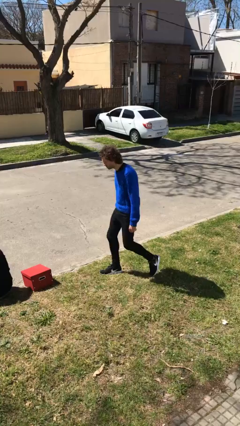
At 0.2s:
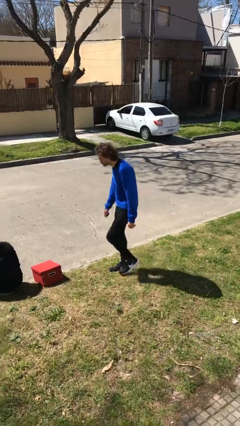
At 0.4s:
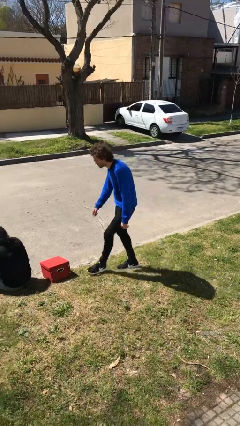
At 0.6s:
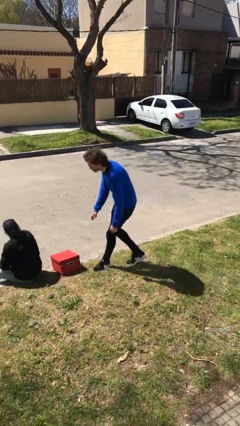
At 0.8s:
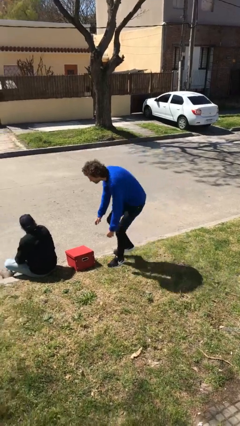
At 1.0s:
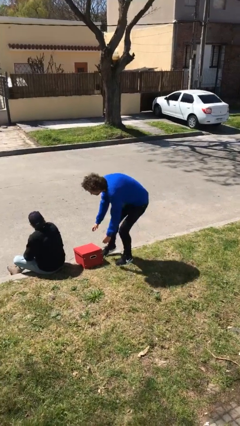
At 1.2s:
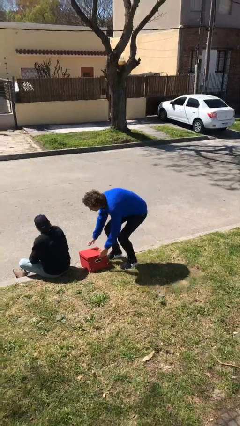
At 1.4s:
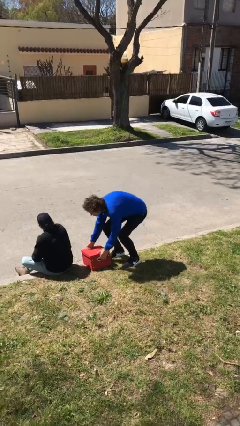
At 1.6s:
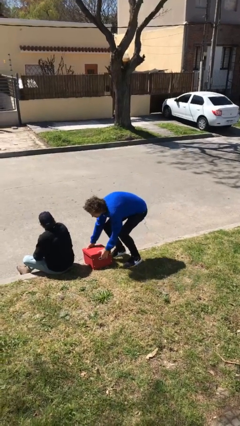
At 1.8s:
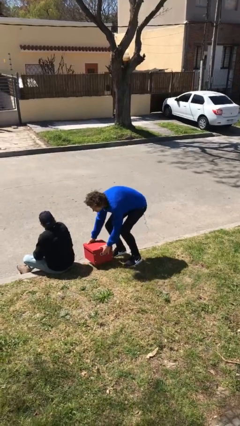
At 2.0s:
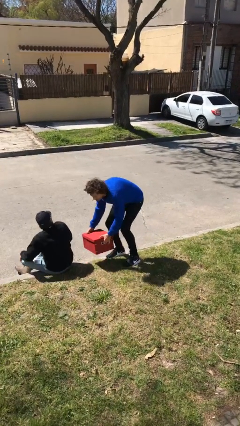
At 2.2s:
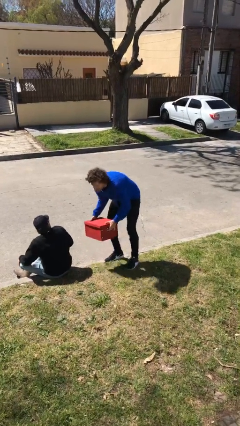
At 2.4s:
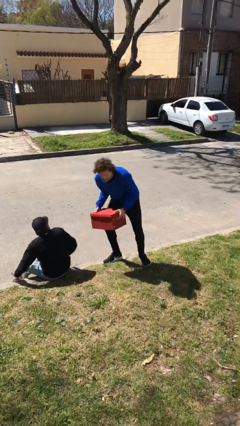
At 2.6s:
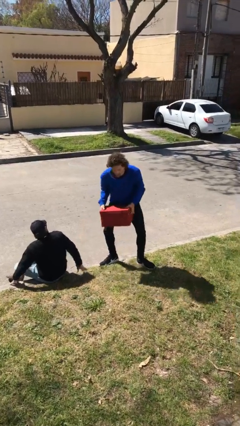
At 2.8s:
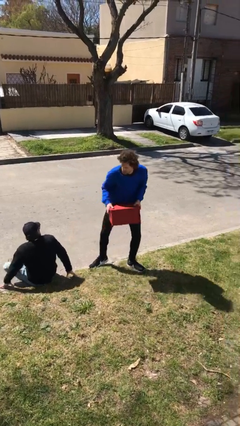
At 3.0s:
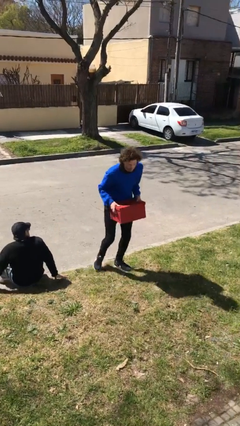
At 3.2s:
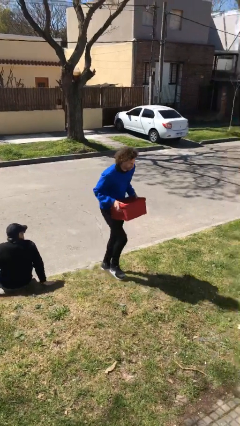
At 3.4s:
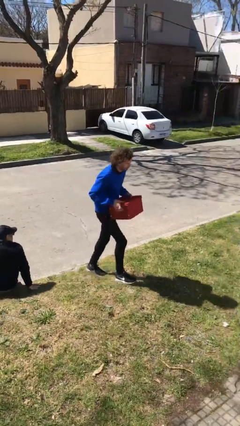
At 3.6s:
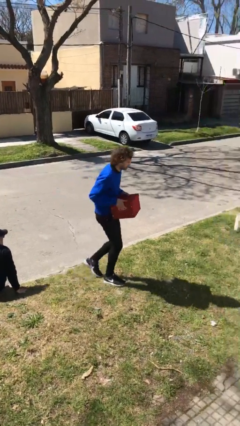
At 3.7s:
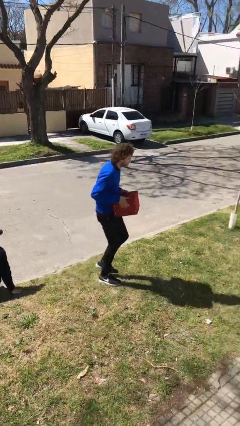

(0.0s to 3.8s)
person steals object from person

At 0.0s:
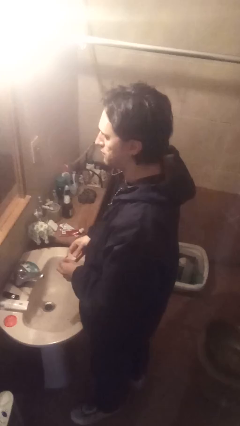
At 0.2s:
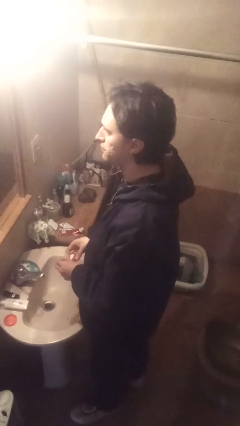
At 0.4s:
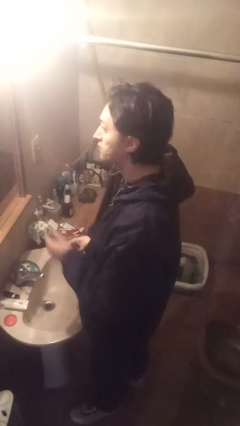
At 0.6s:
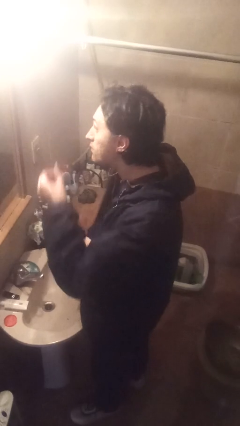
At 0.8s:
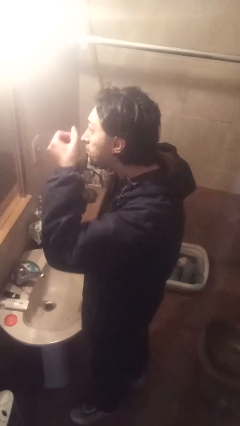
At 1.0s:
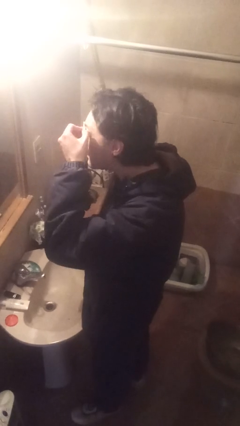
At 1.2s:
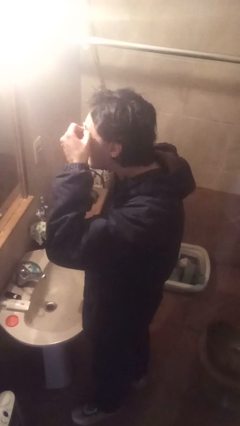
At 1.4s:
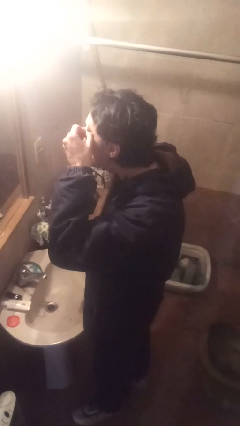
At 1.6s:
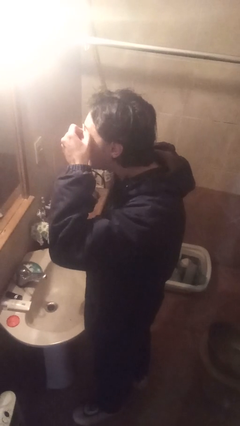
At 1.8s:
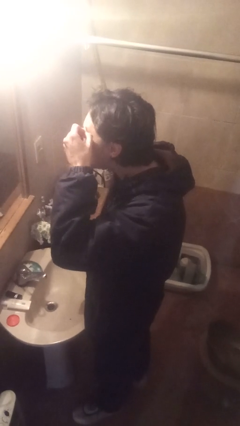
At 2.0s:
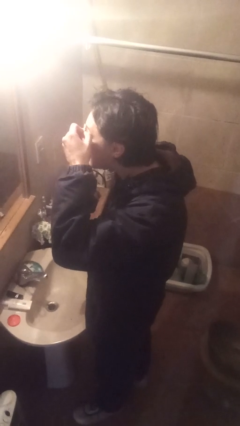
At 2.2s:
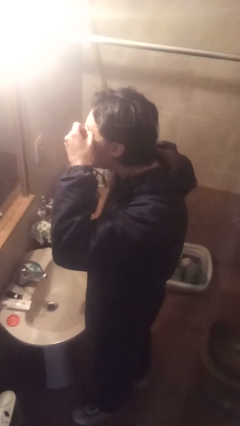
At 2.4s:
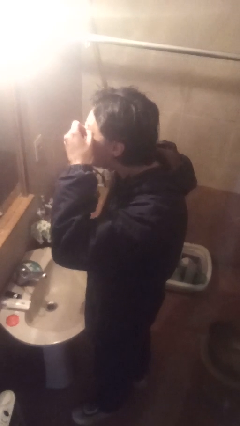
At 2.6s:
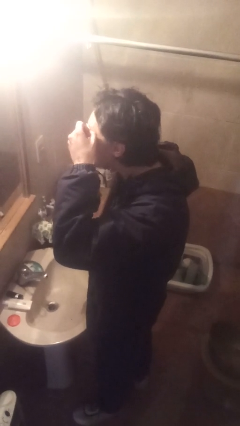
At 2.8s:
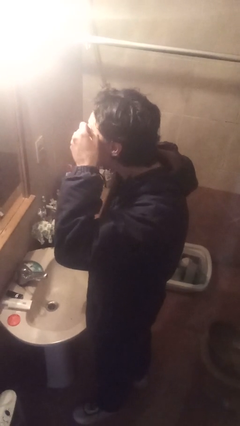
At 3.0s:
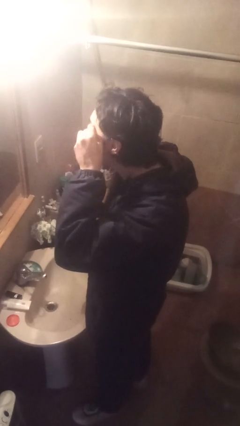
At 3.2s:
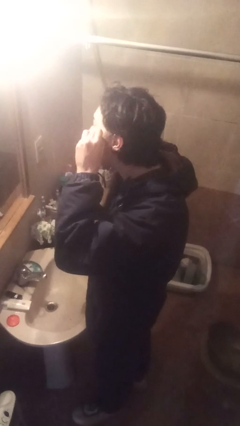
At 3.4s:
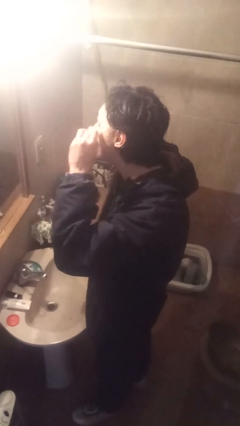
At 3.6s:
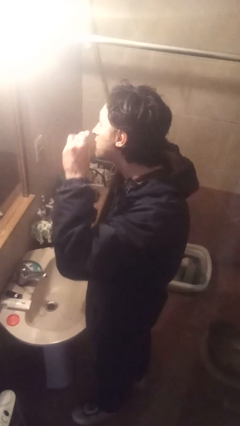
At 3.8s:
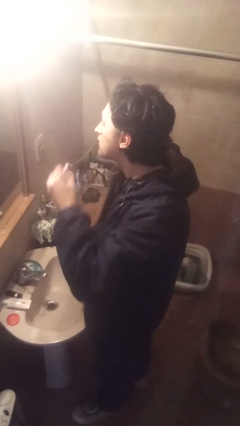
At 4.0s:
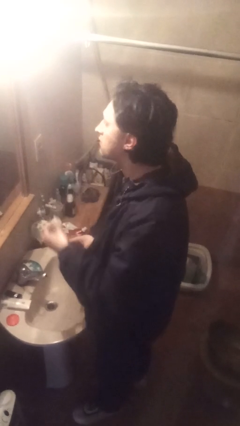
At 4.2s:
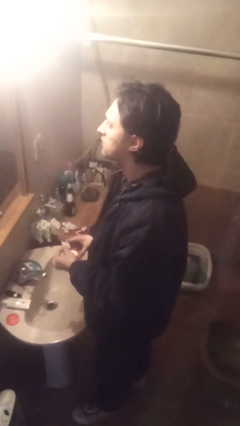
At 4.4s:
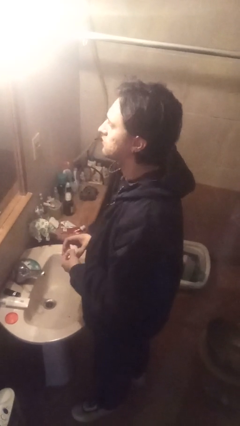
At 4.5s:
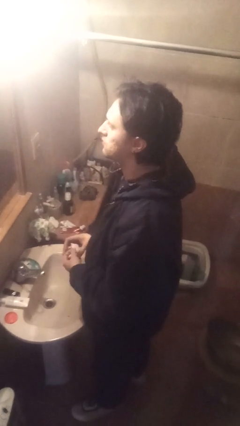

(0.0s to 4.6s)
person applies eye makeup

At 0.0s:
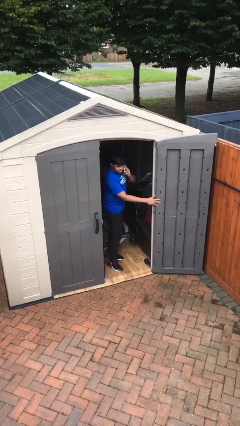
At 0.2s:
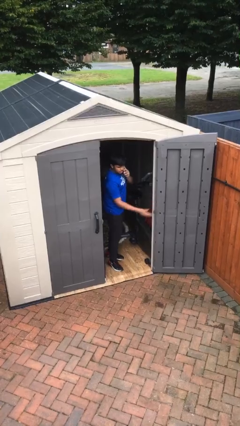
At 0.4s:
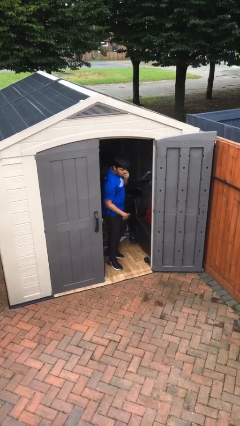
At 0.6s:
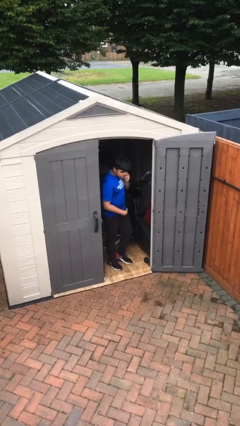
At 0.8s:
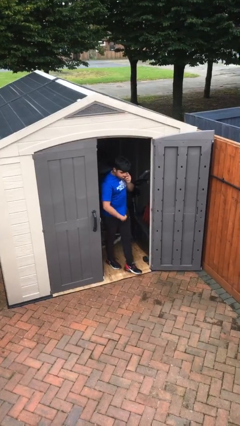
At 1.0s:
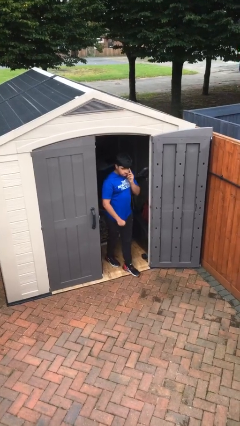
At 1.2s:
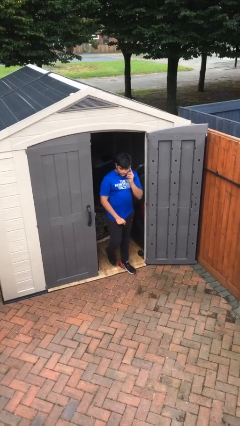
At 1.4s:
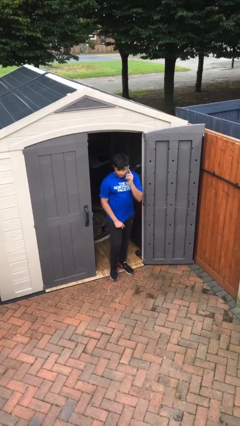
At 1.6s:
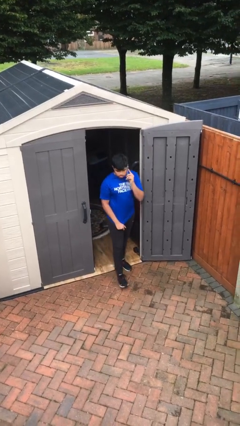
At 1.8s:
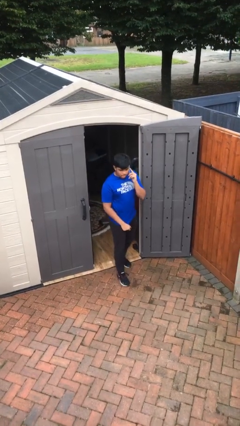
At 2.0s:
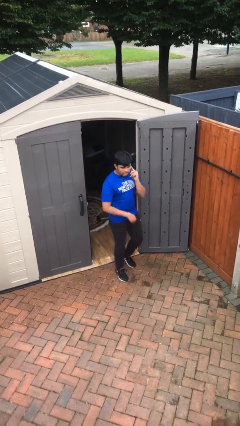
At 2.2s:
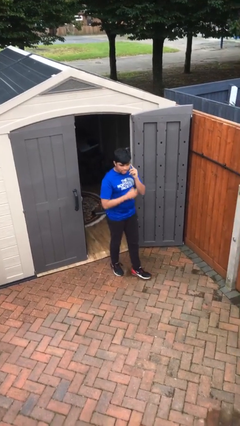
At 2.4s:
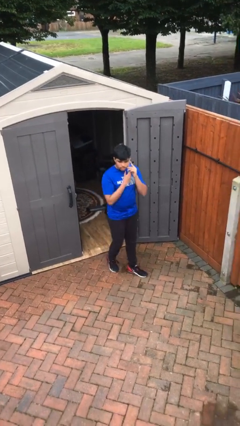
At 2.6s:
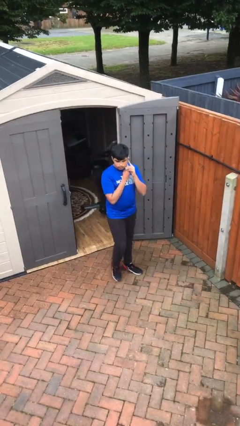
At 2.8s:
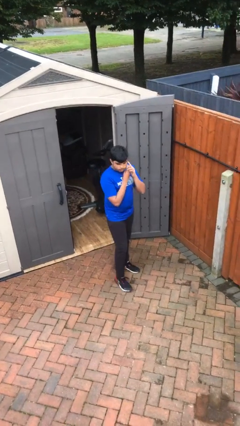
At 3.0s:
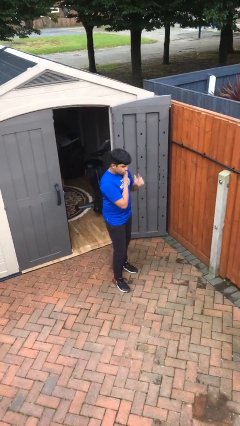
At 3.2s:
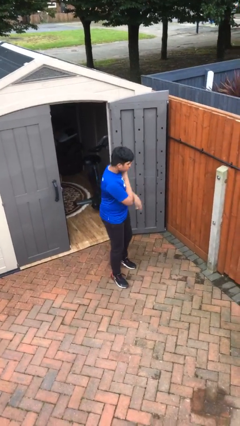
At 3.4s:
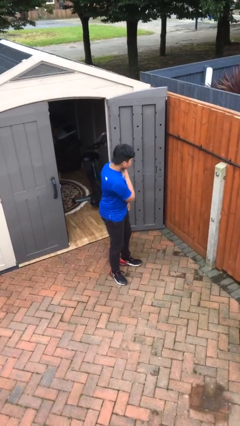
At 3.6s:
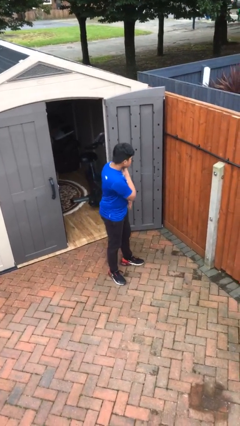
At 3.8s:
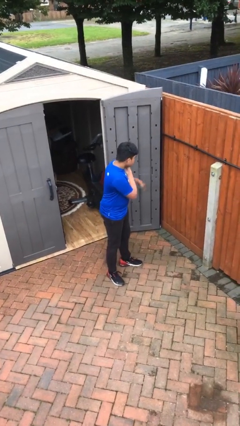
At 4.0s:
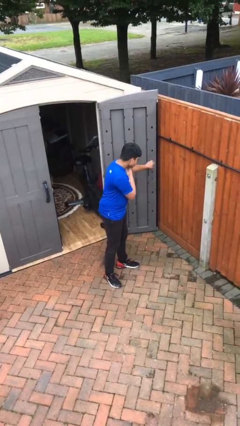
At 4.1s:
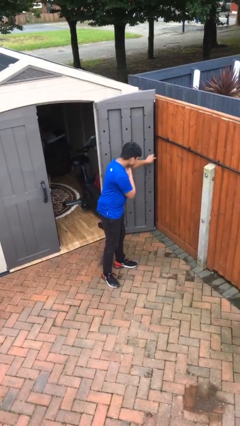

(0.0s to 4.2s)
person enters scene through structure

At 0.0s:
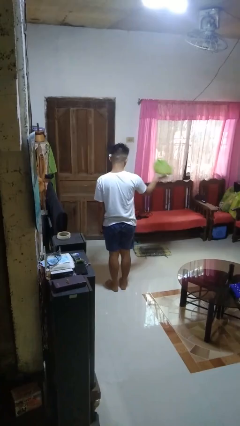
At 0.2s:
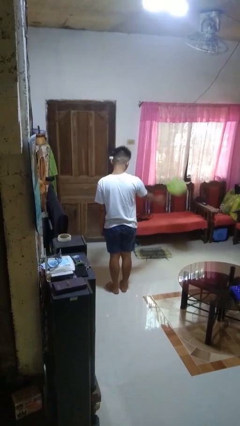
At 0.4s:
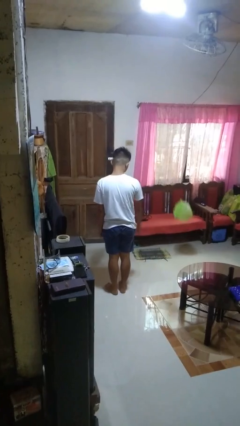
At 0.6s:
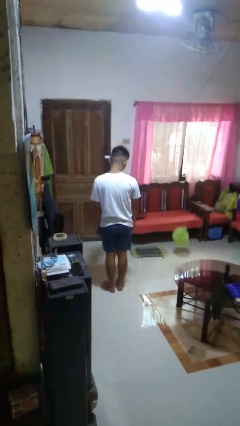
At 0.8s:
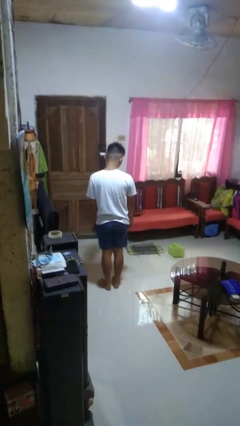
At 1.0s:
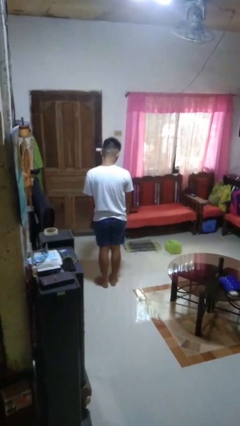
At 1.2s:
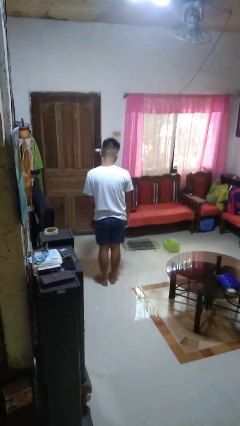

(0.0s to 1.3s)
person throws object to ground

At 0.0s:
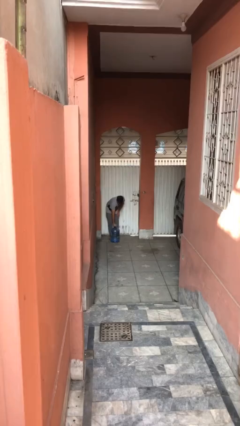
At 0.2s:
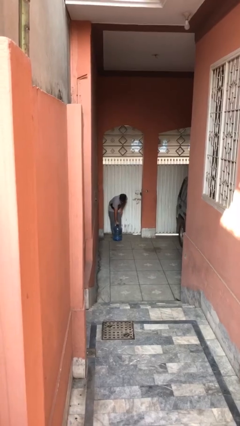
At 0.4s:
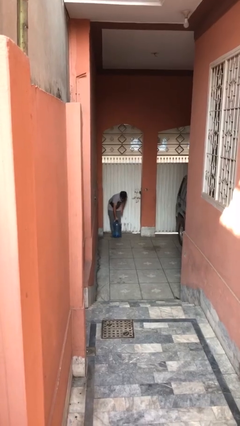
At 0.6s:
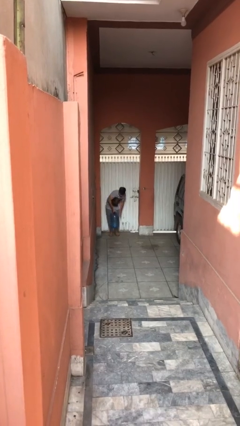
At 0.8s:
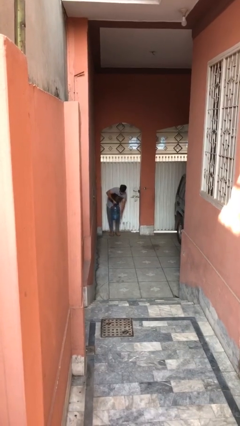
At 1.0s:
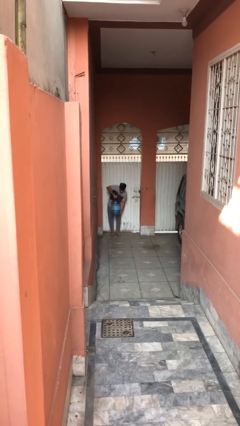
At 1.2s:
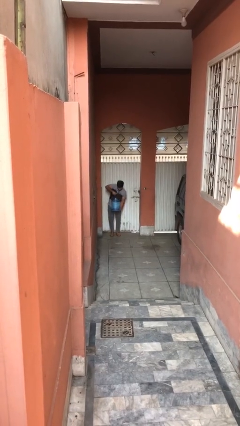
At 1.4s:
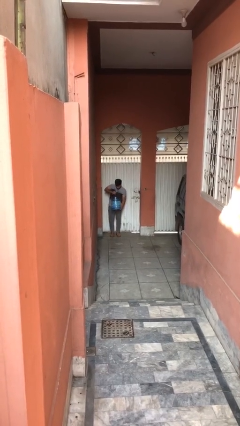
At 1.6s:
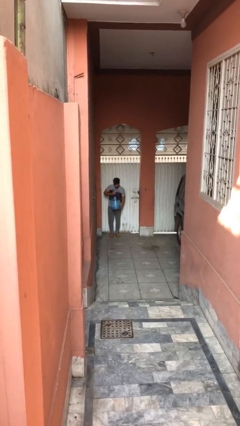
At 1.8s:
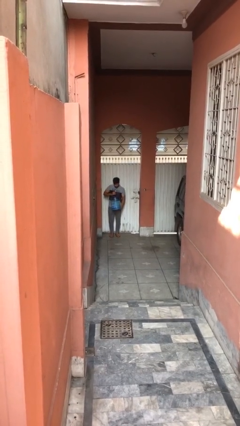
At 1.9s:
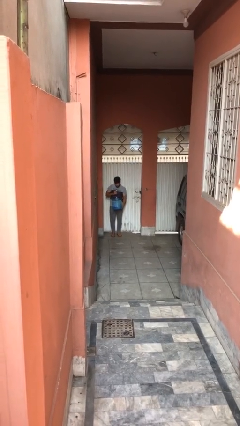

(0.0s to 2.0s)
person picks up object from floor

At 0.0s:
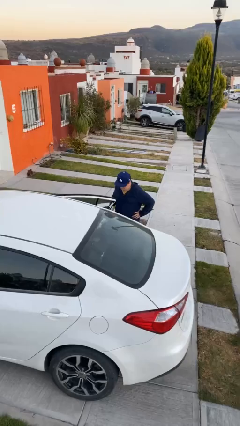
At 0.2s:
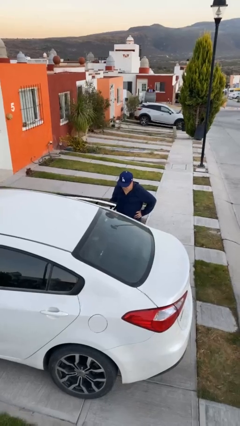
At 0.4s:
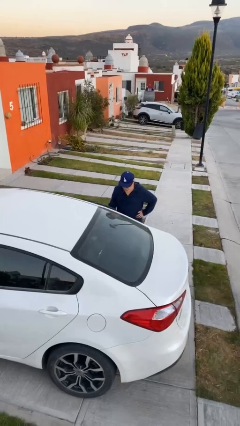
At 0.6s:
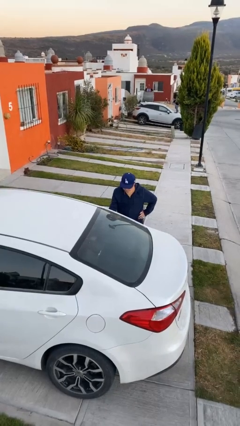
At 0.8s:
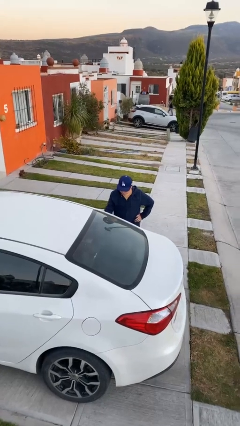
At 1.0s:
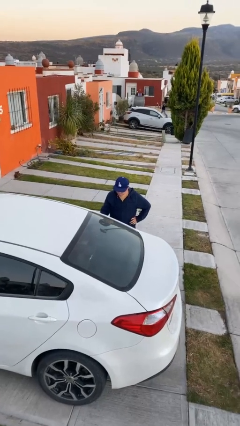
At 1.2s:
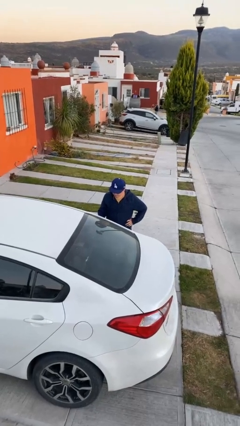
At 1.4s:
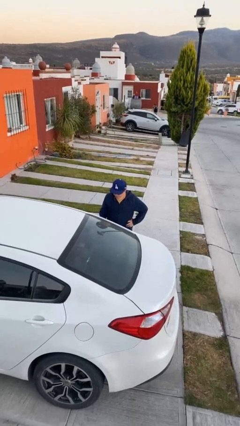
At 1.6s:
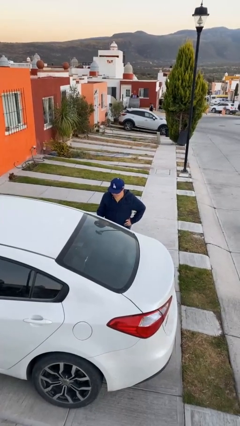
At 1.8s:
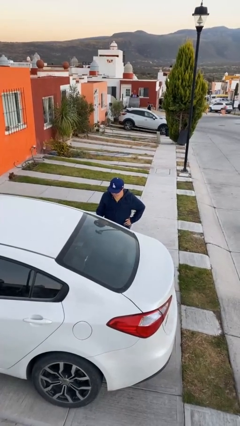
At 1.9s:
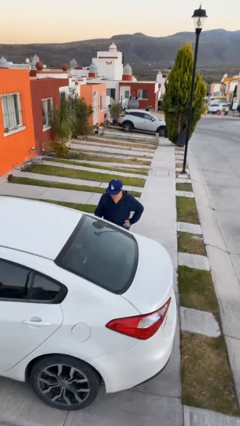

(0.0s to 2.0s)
person closes car door
